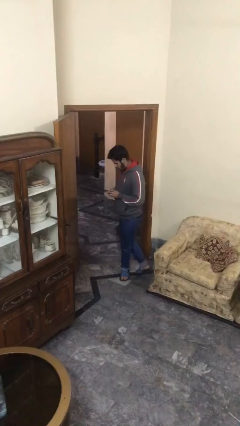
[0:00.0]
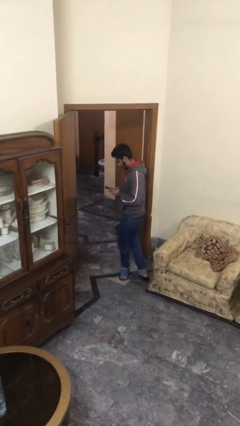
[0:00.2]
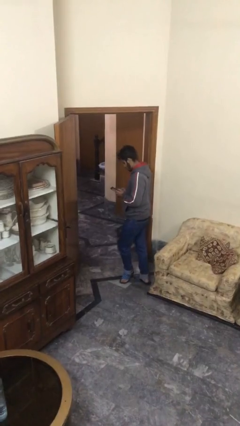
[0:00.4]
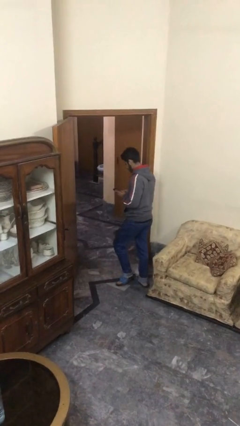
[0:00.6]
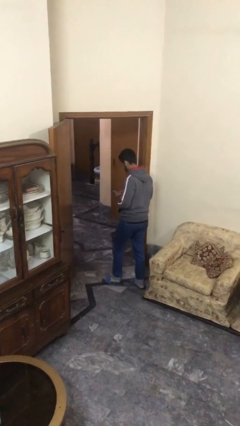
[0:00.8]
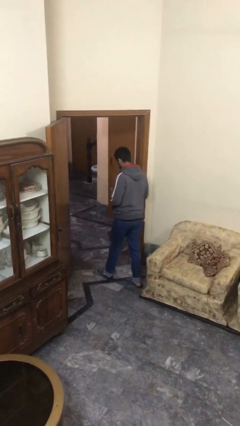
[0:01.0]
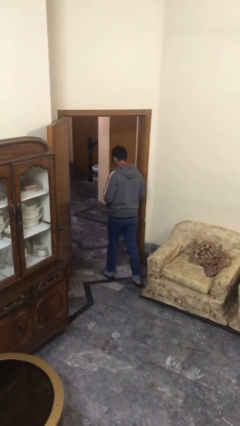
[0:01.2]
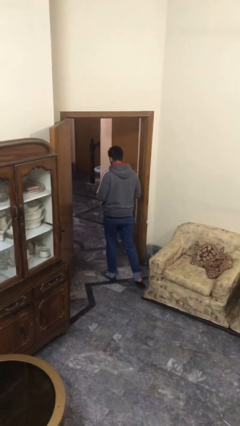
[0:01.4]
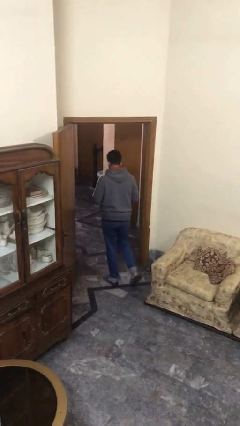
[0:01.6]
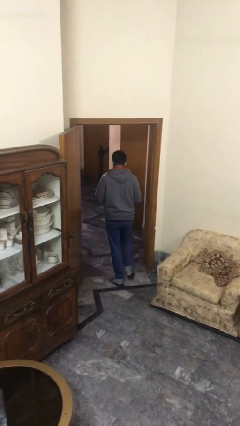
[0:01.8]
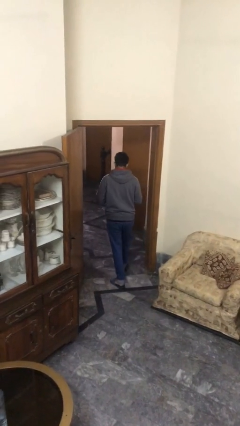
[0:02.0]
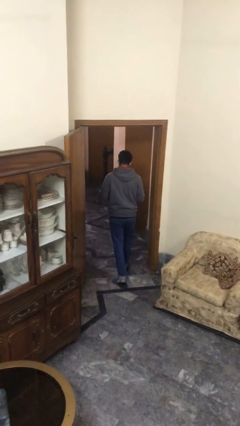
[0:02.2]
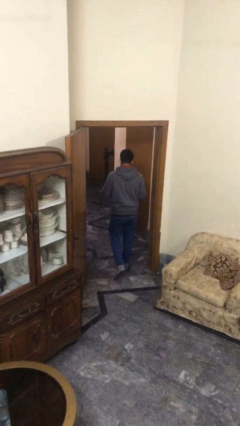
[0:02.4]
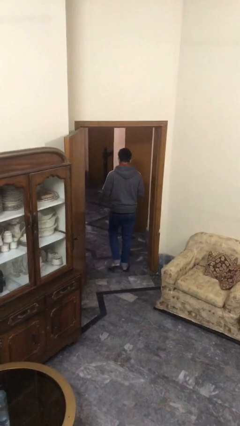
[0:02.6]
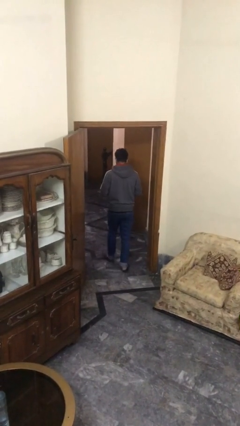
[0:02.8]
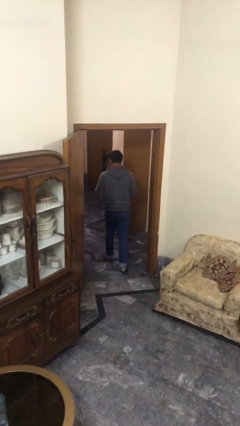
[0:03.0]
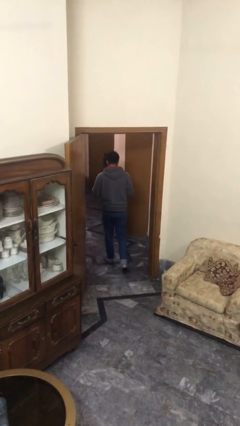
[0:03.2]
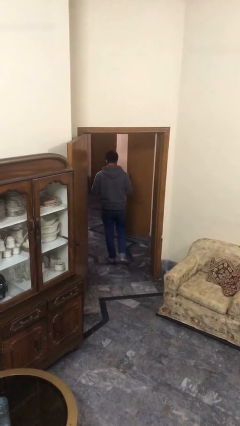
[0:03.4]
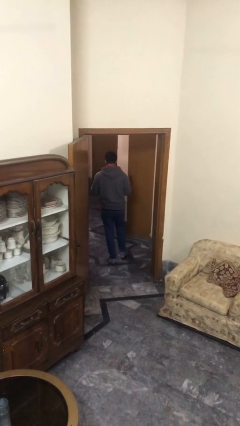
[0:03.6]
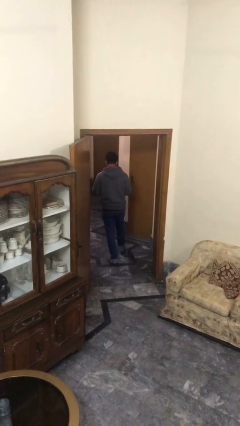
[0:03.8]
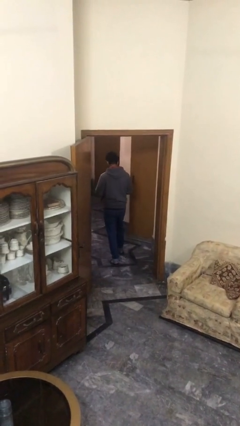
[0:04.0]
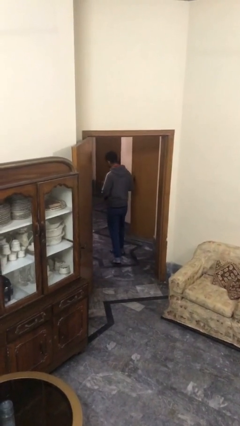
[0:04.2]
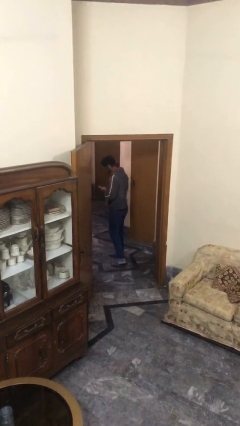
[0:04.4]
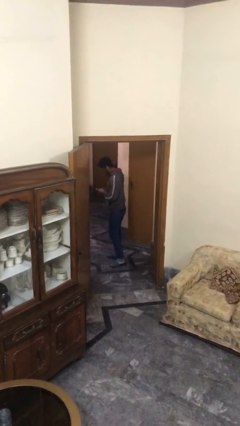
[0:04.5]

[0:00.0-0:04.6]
person exits scene through structure

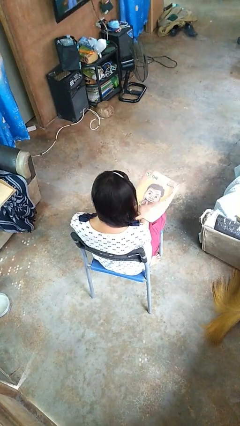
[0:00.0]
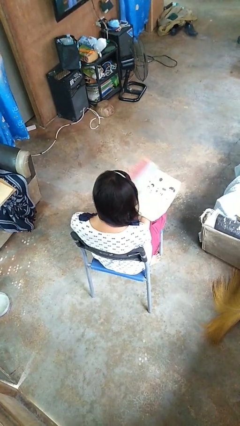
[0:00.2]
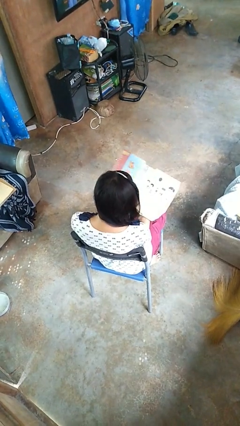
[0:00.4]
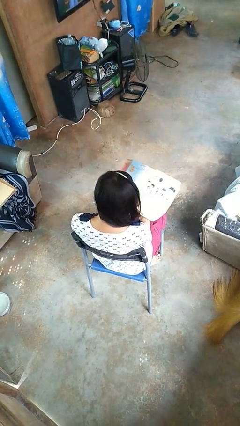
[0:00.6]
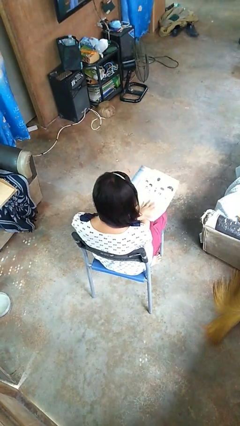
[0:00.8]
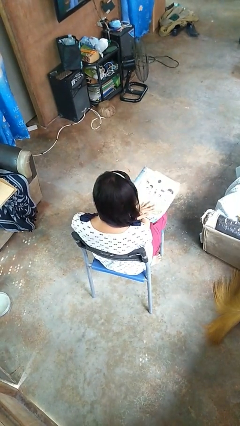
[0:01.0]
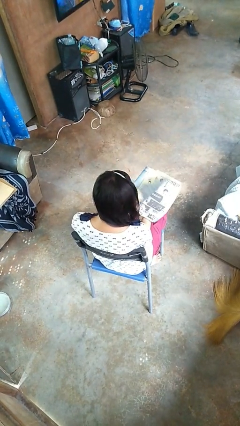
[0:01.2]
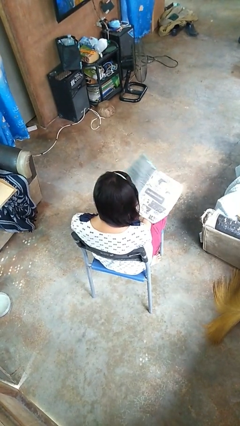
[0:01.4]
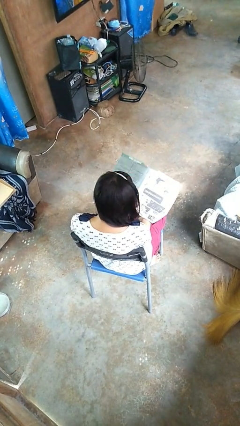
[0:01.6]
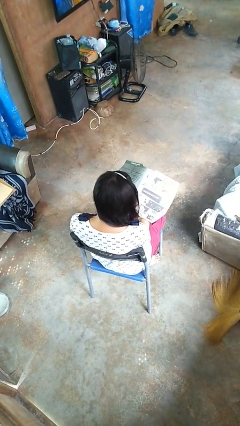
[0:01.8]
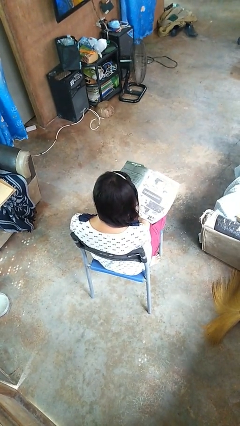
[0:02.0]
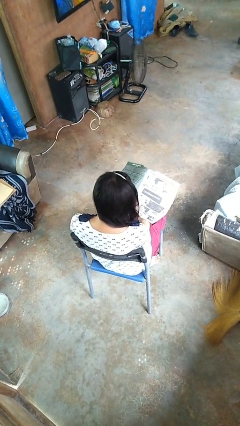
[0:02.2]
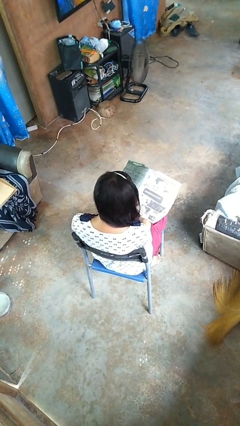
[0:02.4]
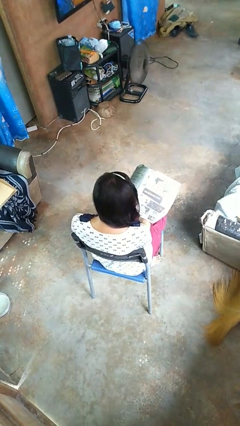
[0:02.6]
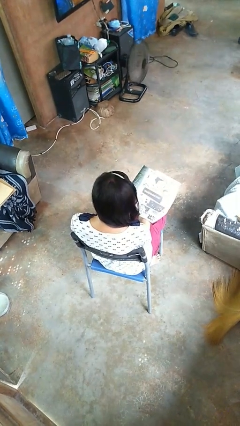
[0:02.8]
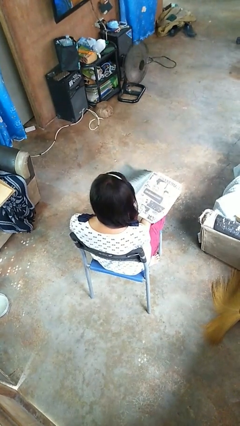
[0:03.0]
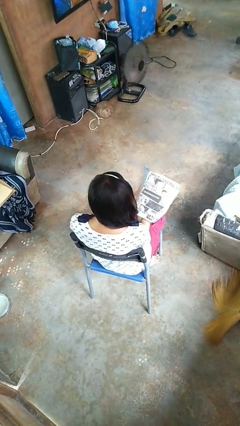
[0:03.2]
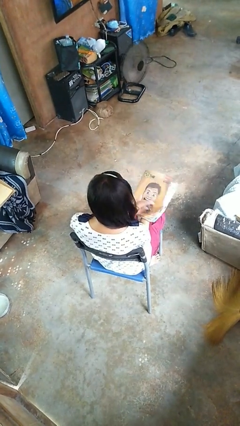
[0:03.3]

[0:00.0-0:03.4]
person reads magazine

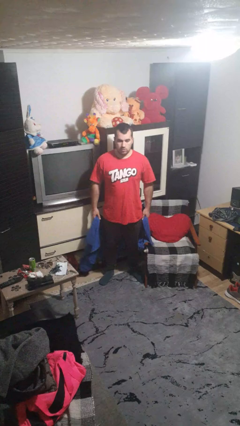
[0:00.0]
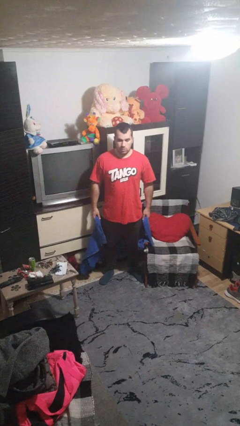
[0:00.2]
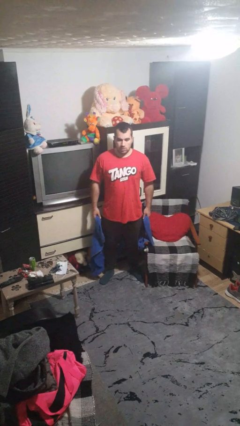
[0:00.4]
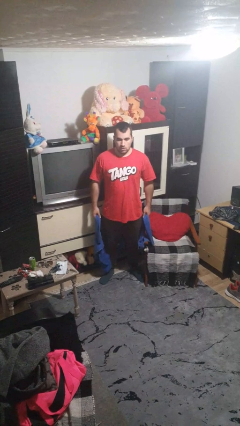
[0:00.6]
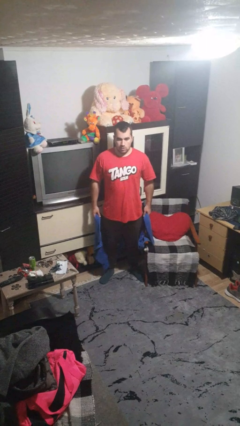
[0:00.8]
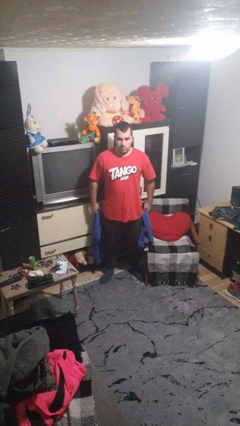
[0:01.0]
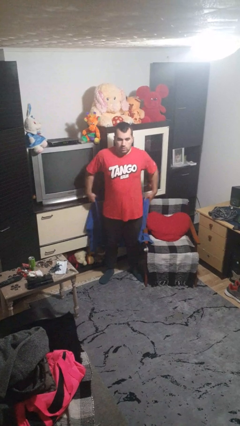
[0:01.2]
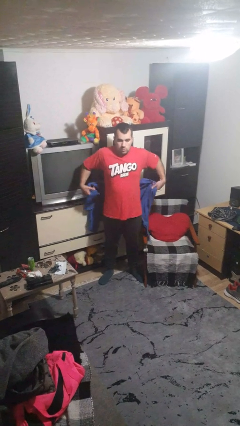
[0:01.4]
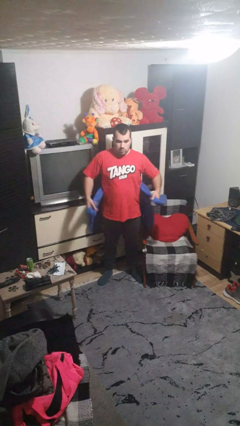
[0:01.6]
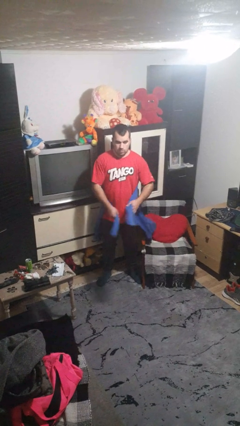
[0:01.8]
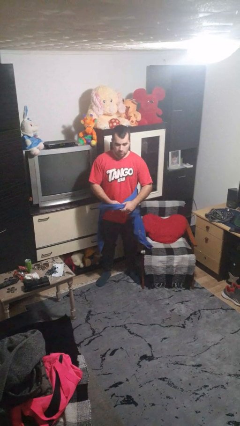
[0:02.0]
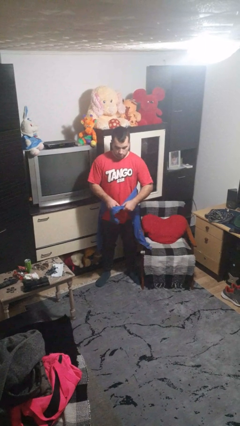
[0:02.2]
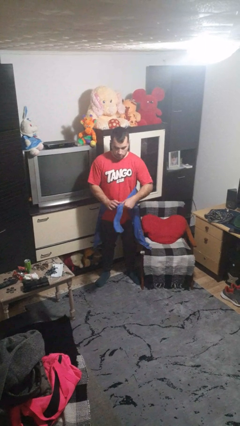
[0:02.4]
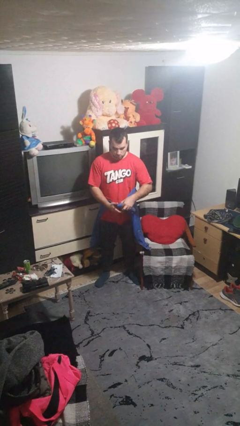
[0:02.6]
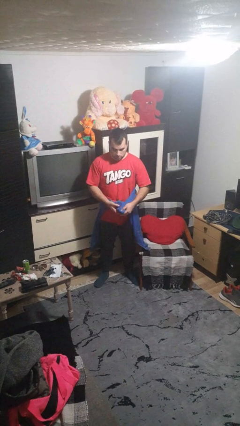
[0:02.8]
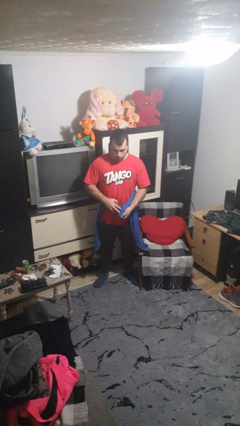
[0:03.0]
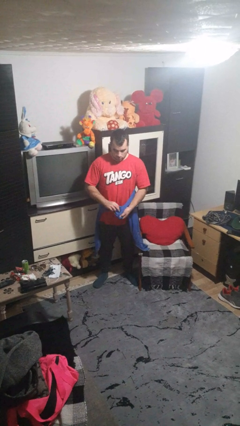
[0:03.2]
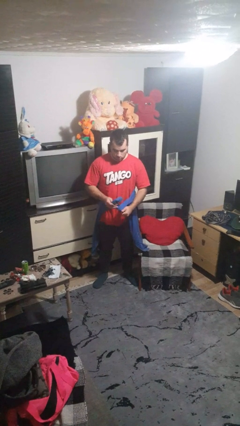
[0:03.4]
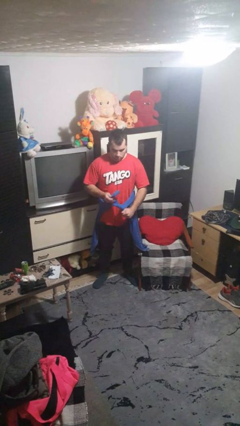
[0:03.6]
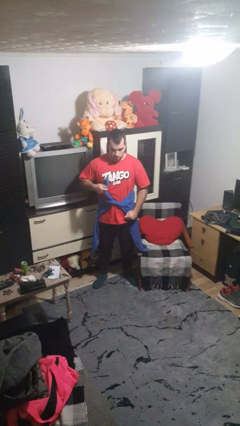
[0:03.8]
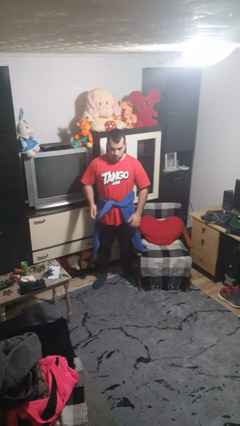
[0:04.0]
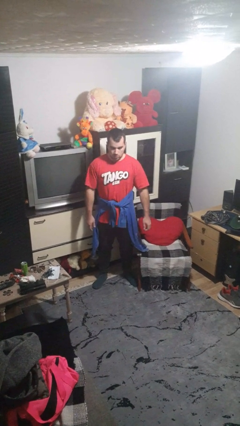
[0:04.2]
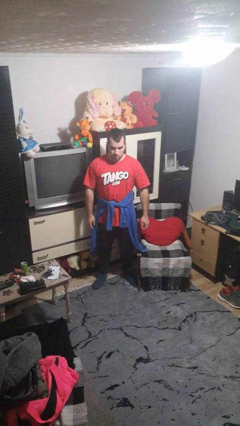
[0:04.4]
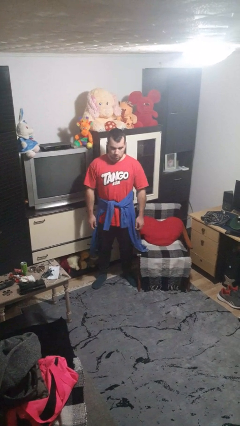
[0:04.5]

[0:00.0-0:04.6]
person ties jacket around waist

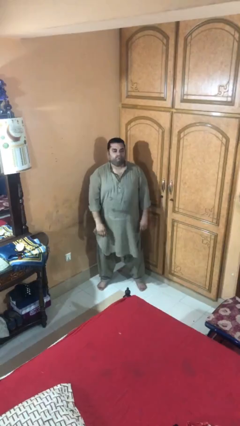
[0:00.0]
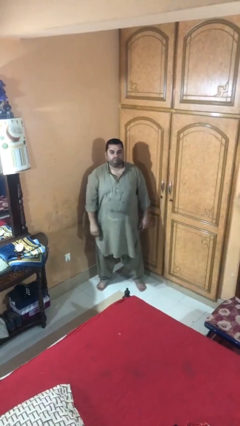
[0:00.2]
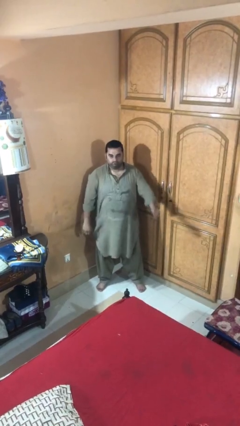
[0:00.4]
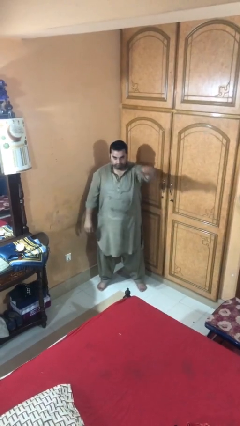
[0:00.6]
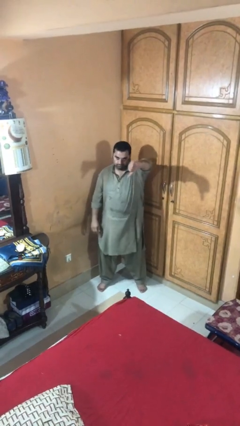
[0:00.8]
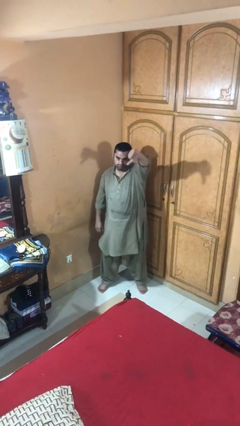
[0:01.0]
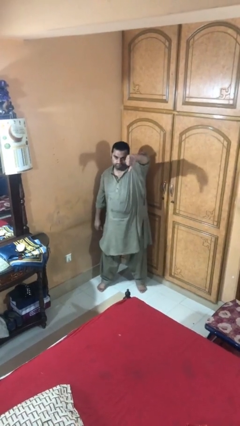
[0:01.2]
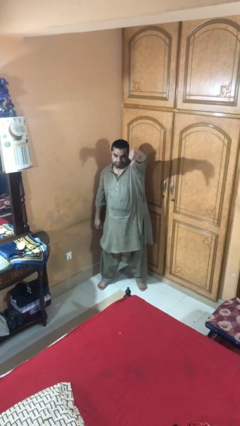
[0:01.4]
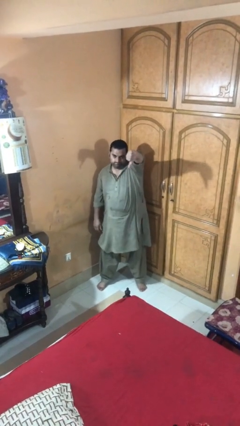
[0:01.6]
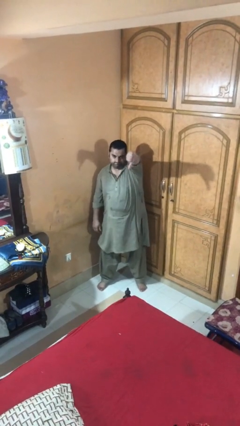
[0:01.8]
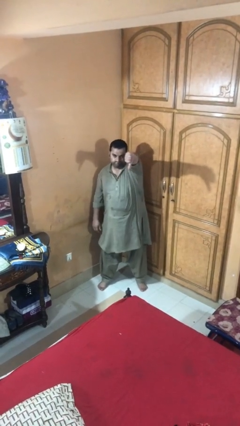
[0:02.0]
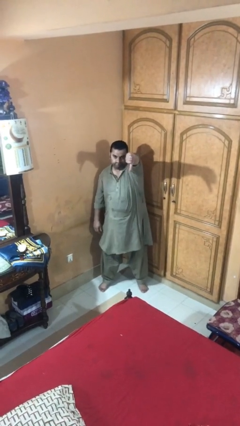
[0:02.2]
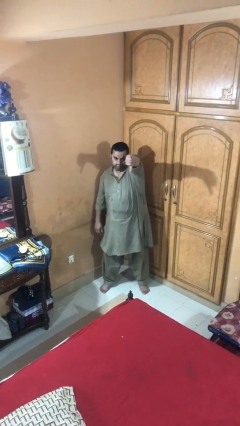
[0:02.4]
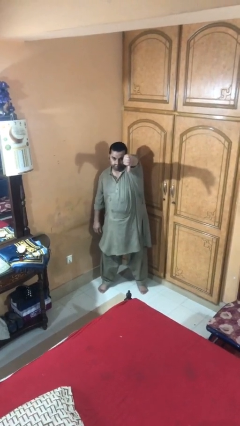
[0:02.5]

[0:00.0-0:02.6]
person gestures thumbs down

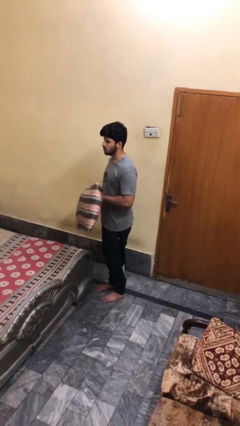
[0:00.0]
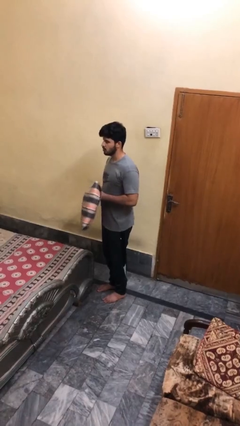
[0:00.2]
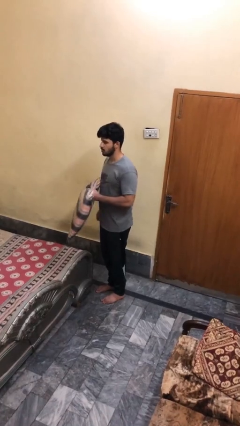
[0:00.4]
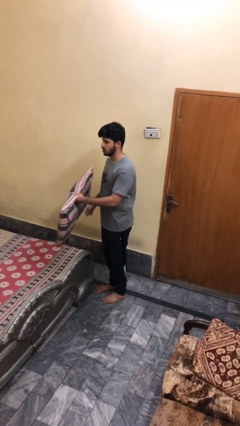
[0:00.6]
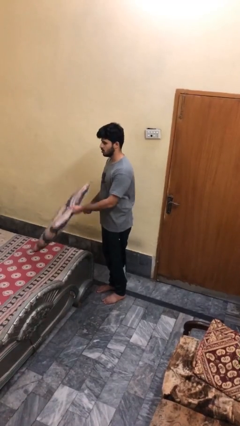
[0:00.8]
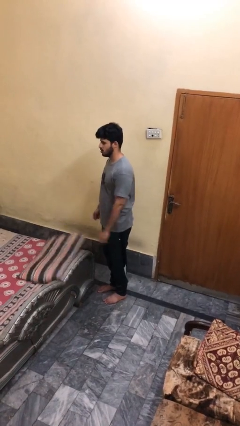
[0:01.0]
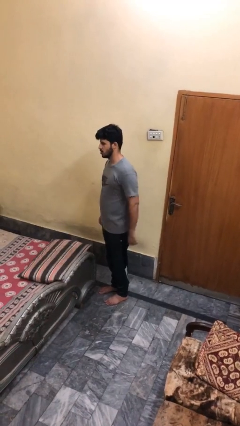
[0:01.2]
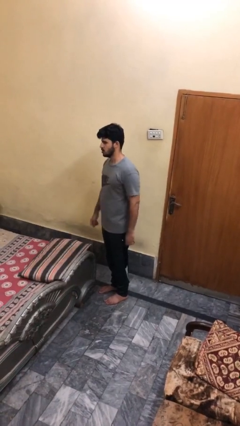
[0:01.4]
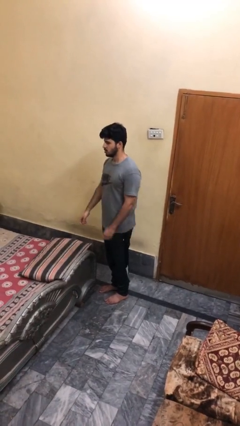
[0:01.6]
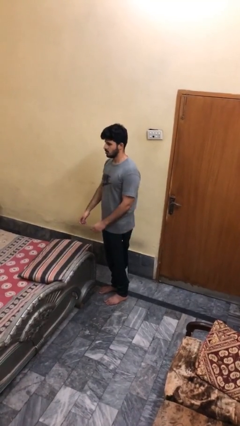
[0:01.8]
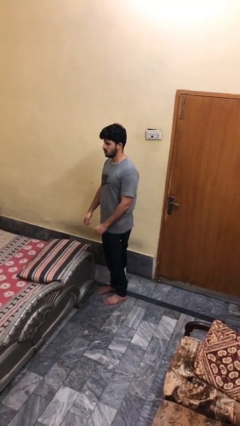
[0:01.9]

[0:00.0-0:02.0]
person puts down object on bed

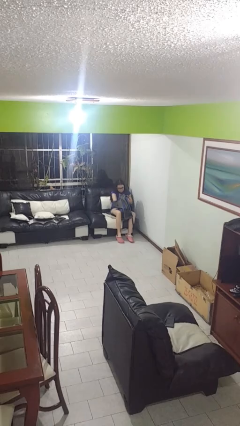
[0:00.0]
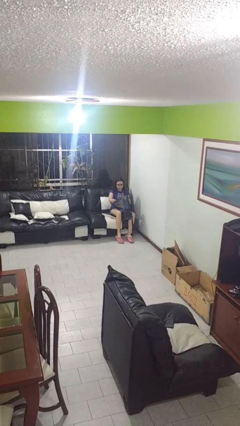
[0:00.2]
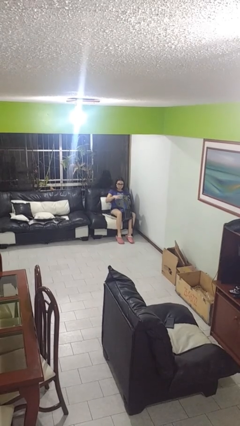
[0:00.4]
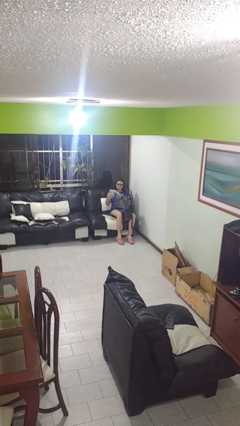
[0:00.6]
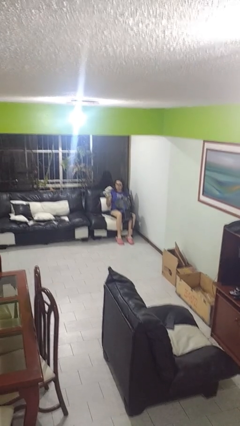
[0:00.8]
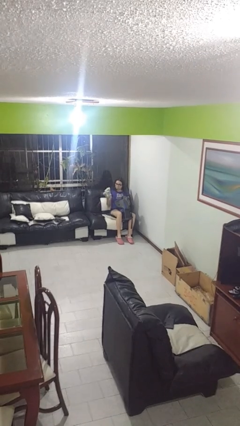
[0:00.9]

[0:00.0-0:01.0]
person takes object from backpack
